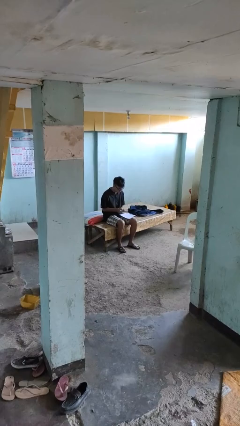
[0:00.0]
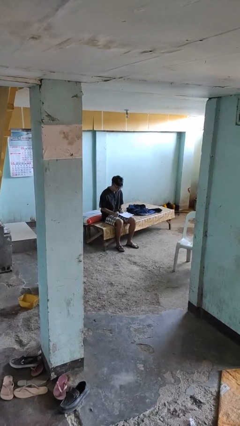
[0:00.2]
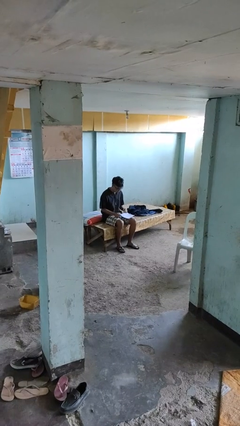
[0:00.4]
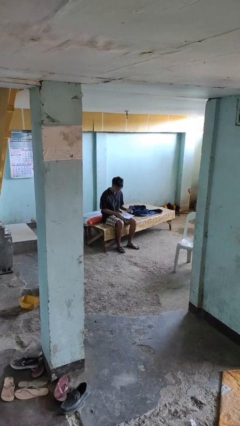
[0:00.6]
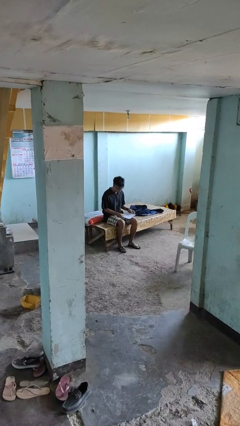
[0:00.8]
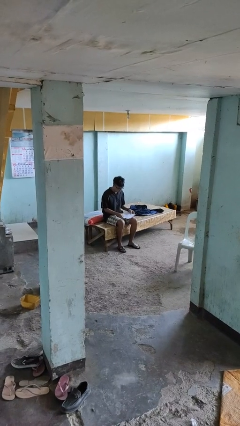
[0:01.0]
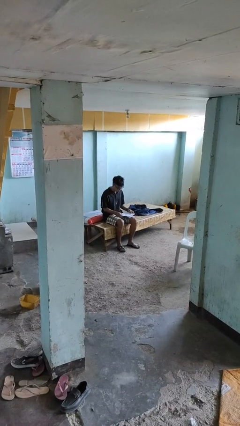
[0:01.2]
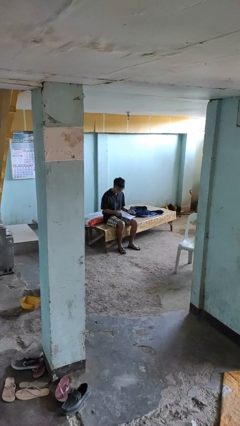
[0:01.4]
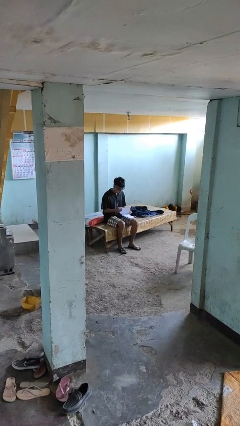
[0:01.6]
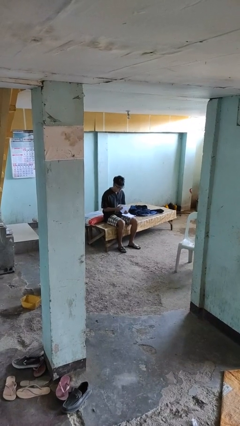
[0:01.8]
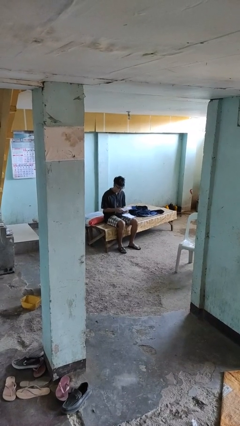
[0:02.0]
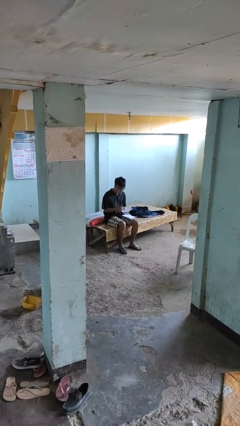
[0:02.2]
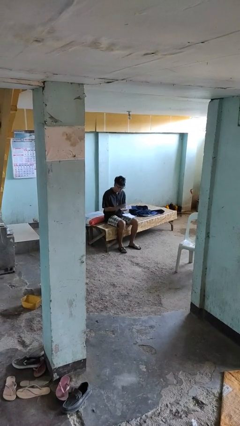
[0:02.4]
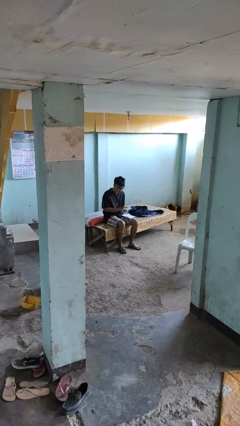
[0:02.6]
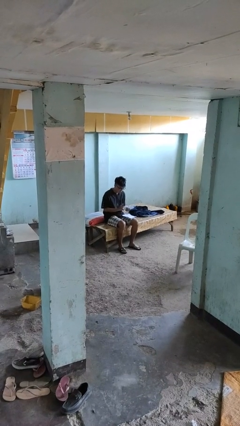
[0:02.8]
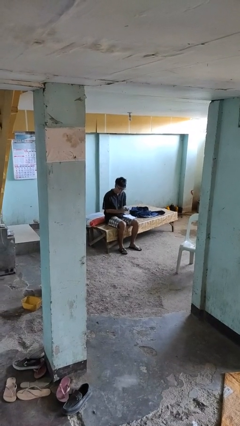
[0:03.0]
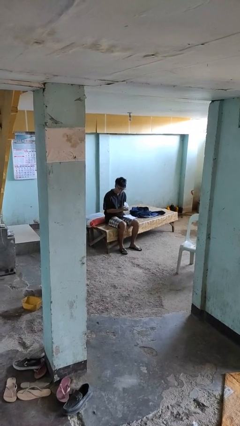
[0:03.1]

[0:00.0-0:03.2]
person crumples paper

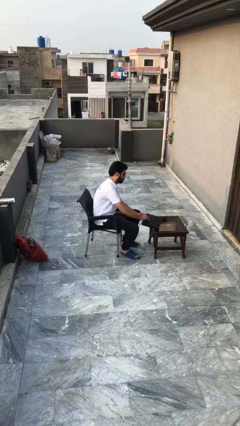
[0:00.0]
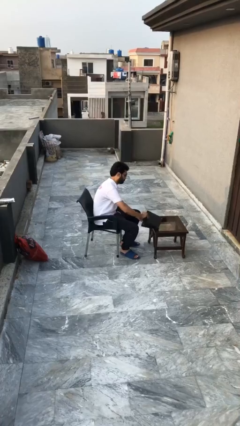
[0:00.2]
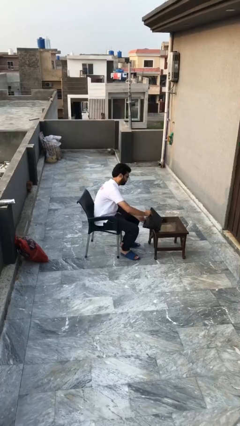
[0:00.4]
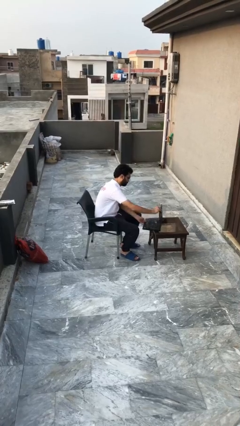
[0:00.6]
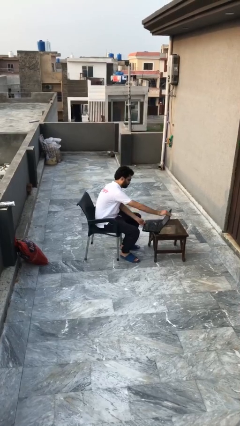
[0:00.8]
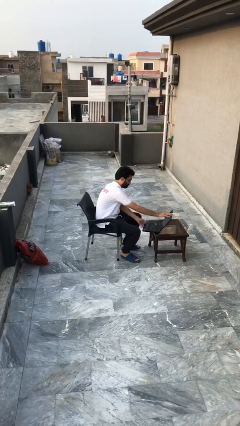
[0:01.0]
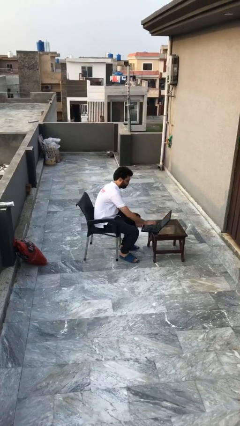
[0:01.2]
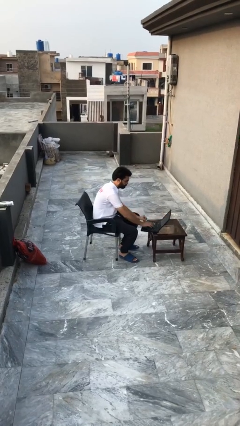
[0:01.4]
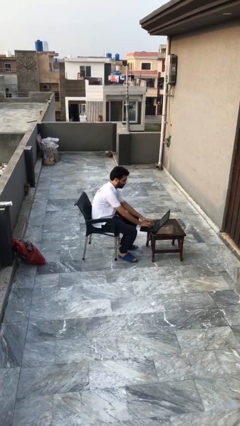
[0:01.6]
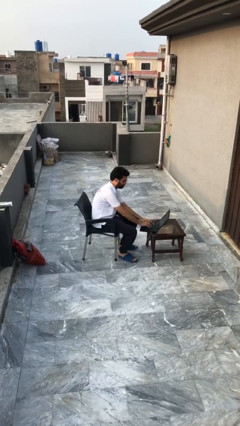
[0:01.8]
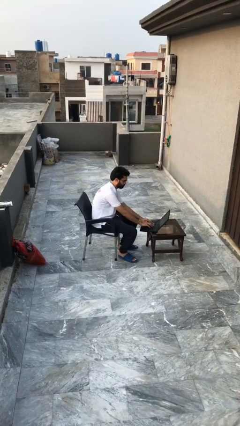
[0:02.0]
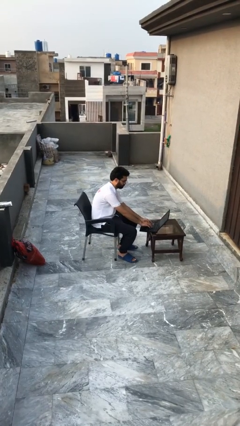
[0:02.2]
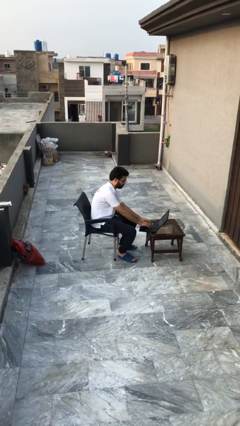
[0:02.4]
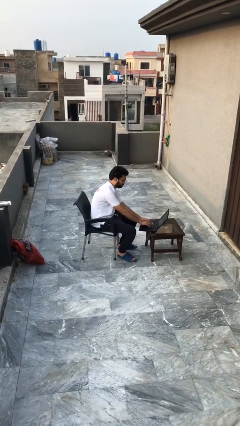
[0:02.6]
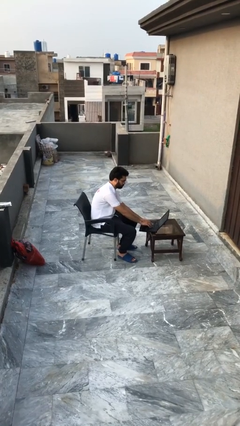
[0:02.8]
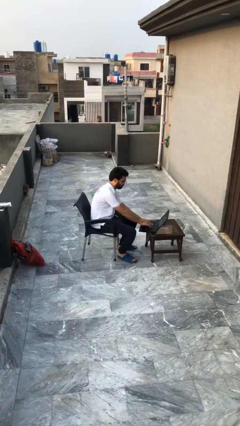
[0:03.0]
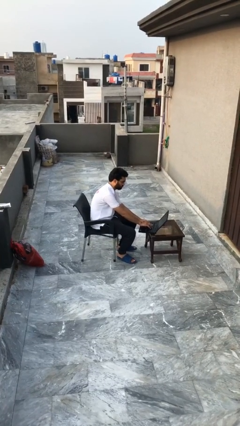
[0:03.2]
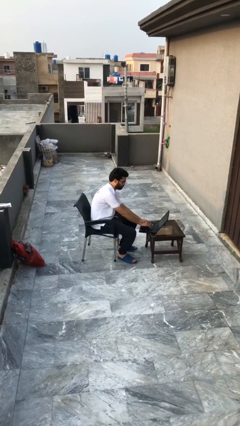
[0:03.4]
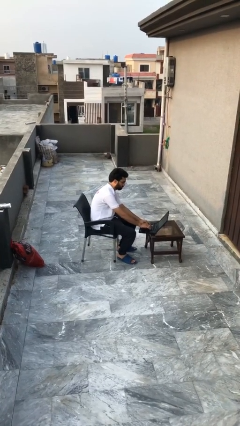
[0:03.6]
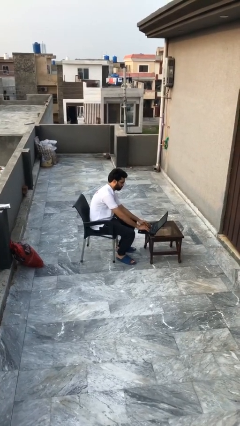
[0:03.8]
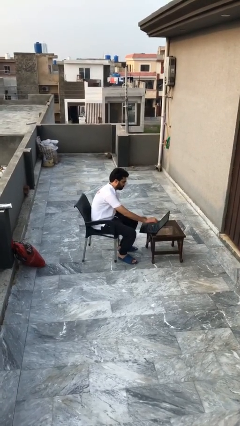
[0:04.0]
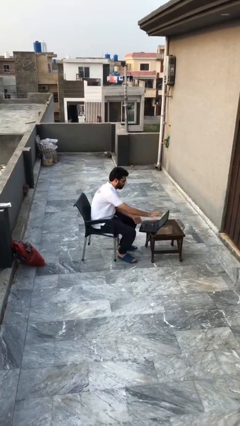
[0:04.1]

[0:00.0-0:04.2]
person interacts with laptop

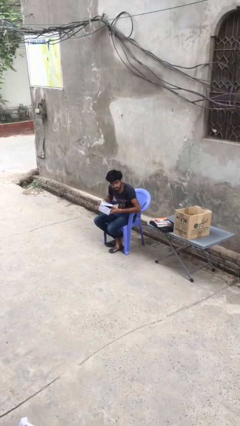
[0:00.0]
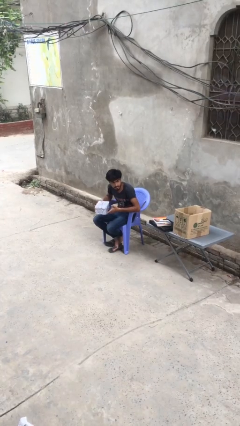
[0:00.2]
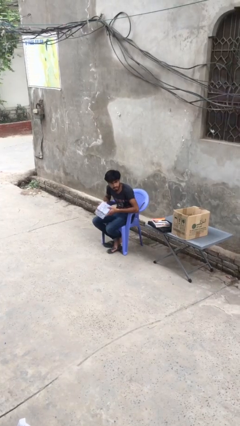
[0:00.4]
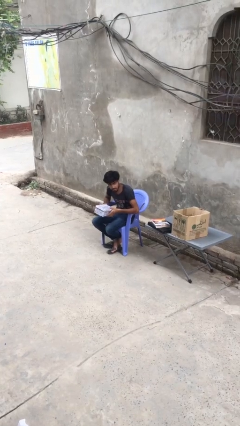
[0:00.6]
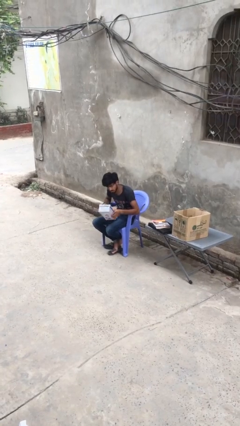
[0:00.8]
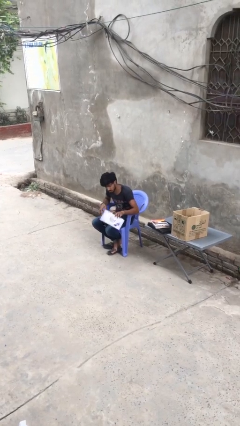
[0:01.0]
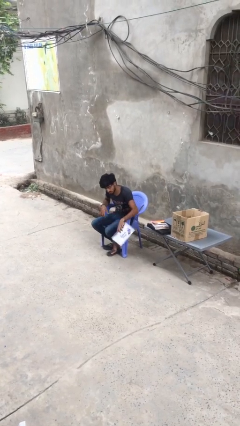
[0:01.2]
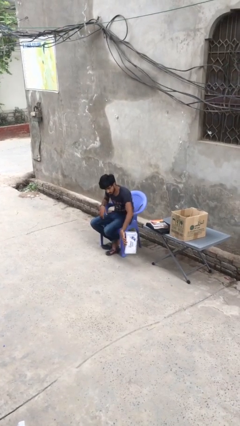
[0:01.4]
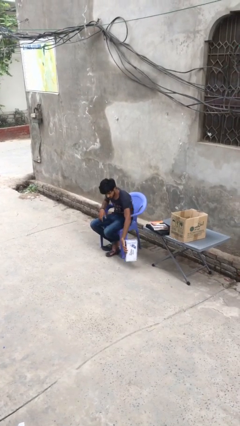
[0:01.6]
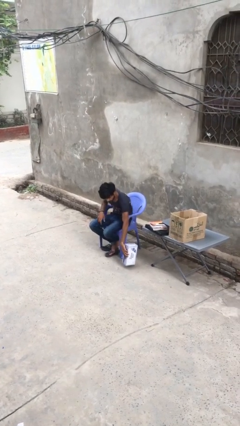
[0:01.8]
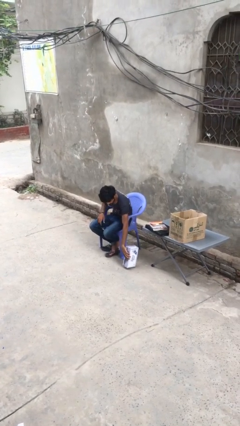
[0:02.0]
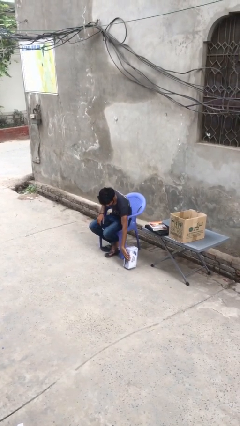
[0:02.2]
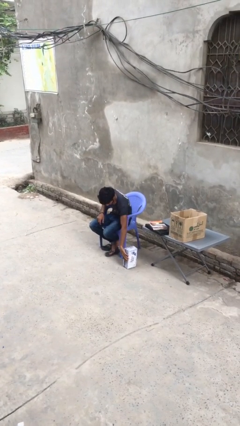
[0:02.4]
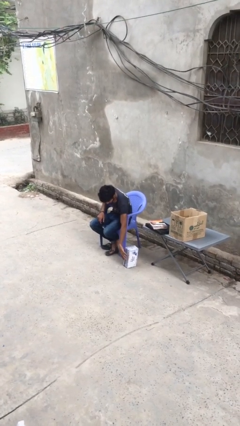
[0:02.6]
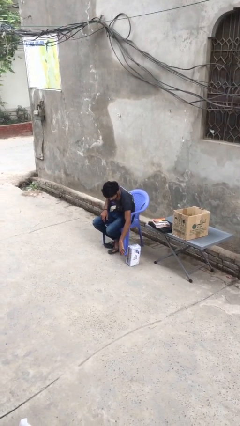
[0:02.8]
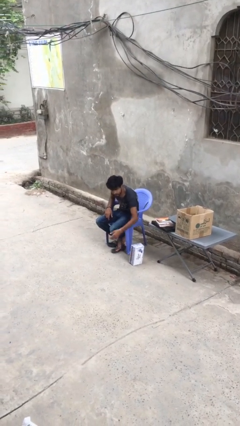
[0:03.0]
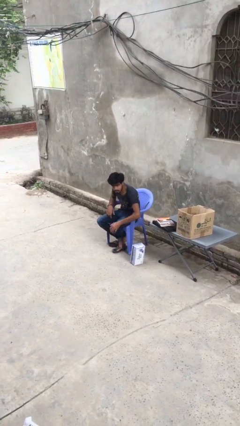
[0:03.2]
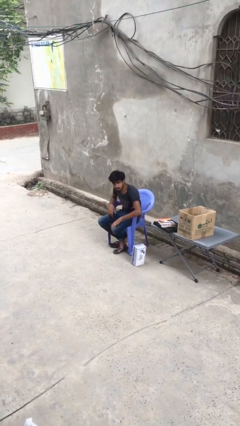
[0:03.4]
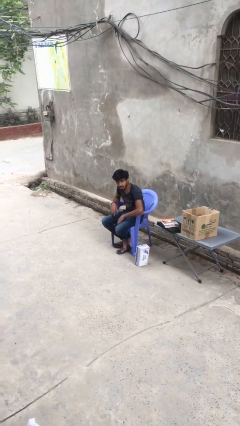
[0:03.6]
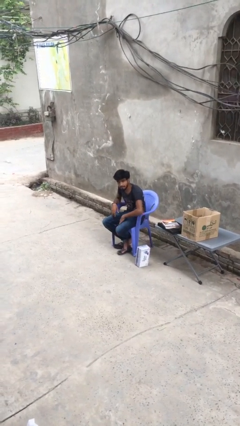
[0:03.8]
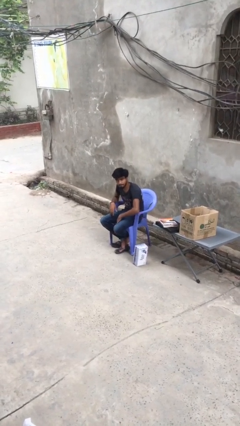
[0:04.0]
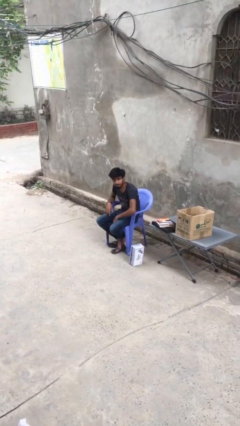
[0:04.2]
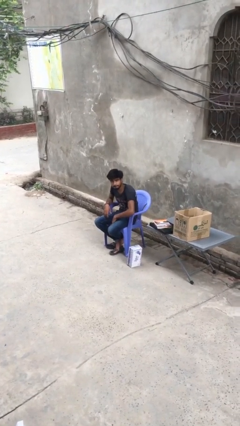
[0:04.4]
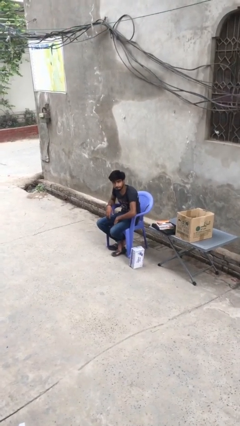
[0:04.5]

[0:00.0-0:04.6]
person puts down object on floor

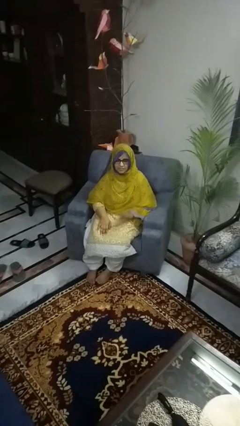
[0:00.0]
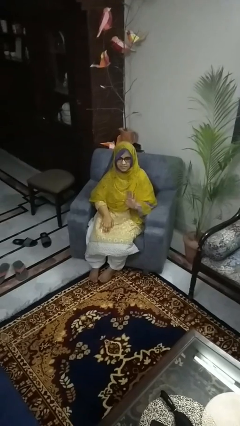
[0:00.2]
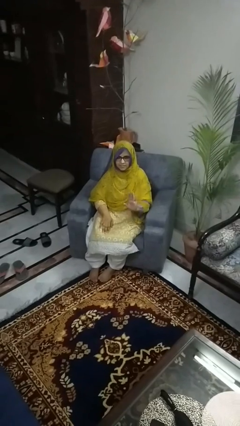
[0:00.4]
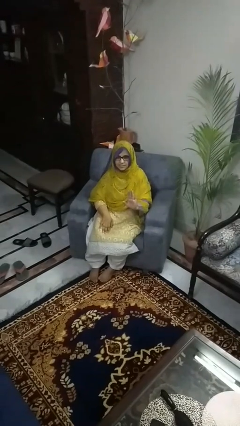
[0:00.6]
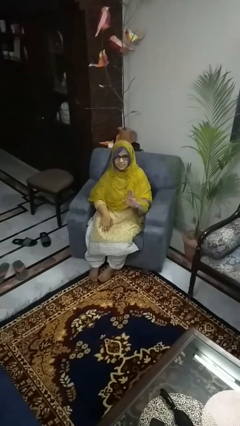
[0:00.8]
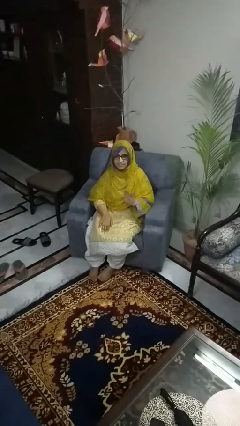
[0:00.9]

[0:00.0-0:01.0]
person gestures stop

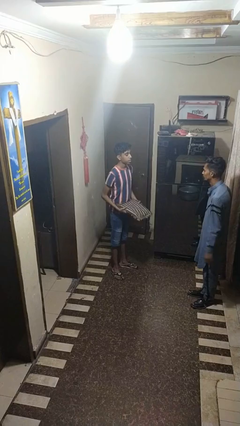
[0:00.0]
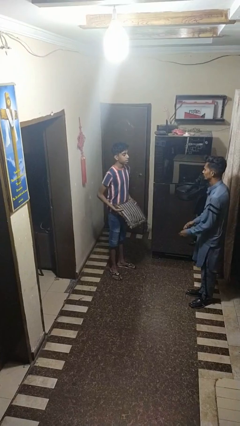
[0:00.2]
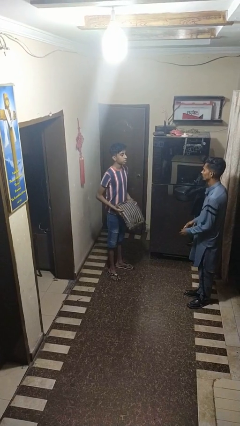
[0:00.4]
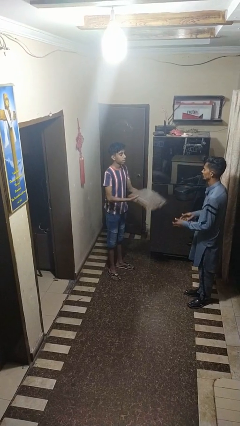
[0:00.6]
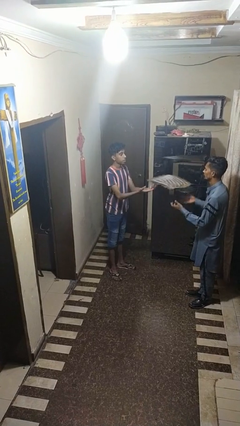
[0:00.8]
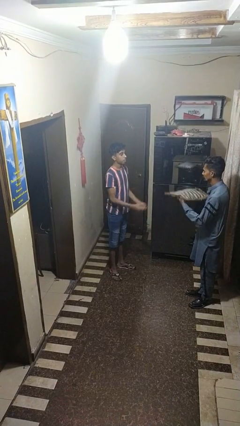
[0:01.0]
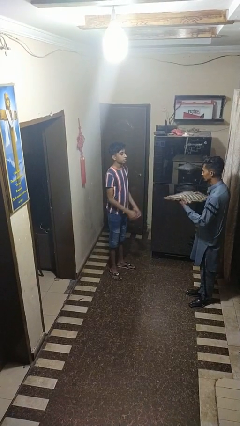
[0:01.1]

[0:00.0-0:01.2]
person throws object to person

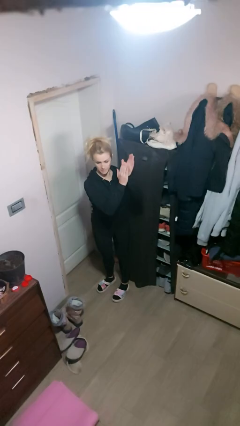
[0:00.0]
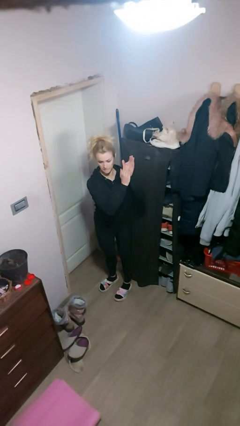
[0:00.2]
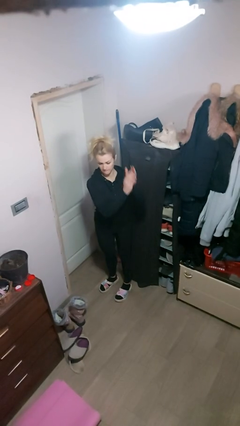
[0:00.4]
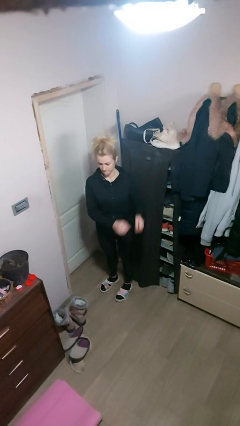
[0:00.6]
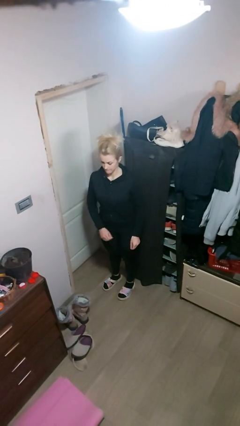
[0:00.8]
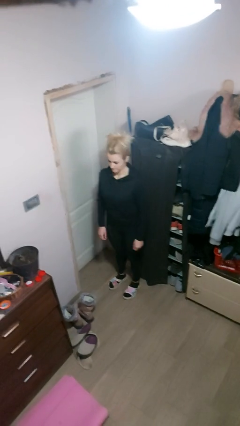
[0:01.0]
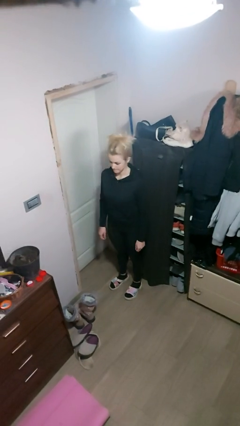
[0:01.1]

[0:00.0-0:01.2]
person claps hands

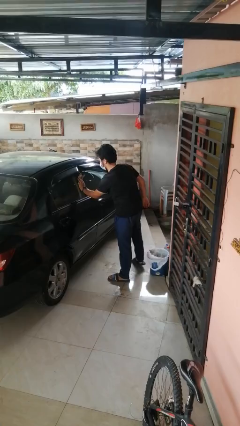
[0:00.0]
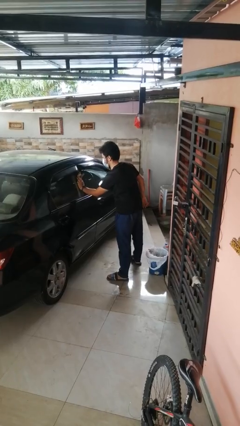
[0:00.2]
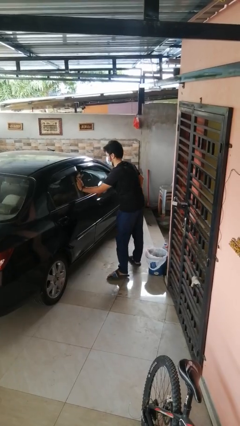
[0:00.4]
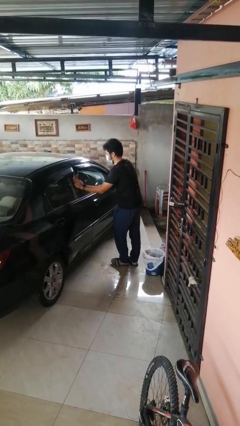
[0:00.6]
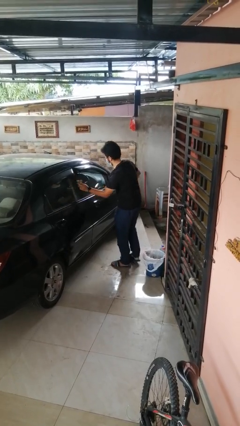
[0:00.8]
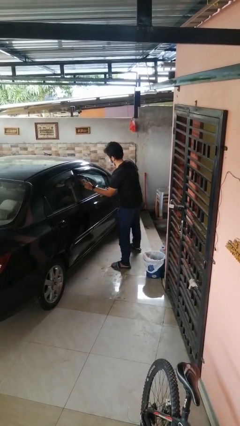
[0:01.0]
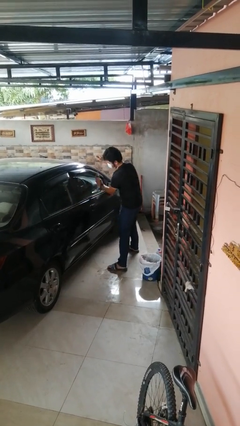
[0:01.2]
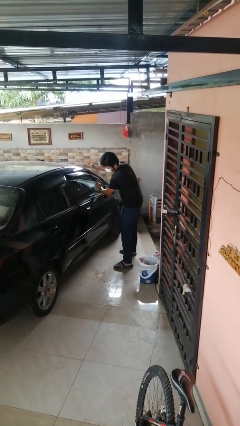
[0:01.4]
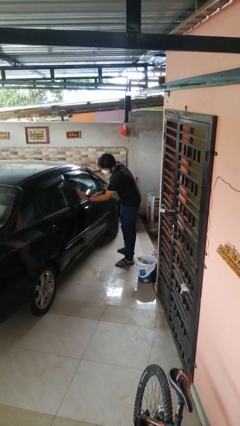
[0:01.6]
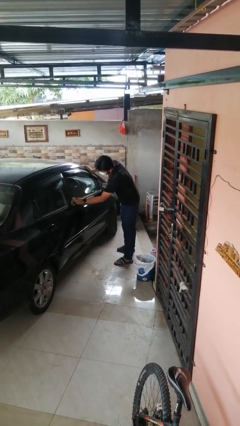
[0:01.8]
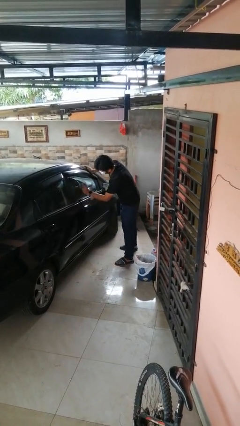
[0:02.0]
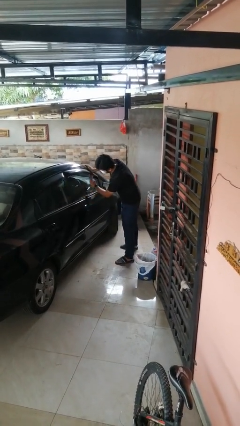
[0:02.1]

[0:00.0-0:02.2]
person polishes car with rag
